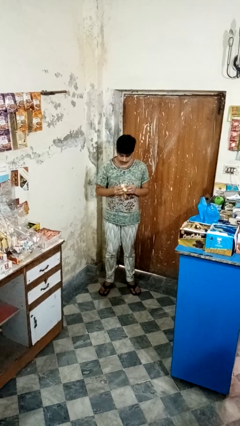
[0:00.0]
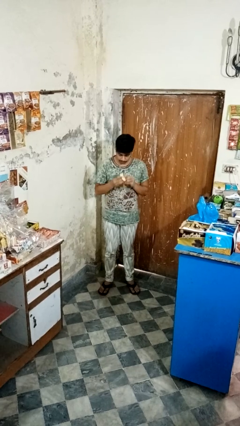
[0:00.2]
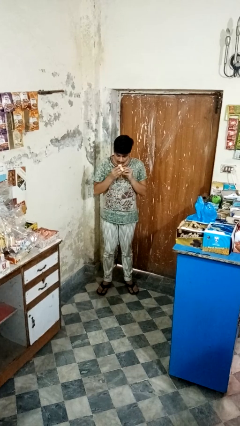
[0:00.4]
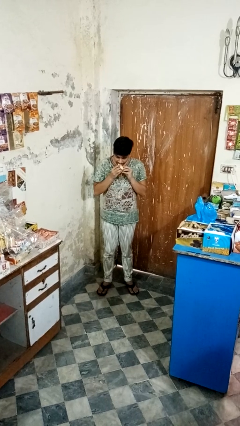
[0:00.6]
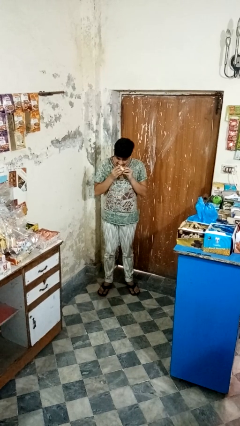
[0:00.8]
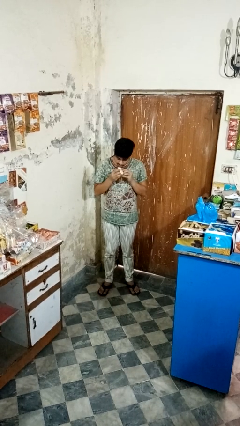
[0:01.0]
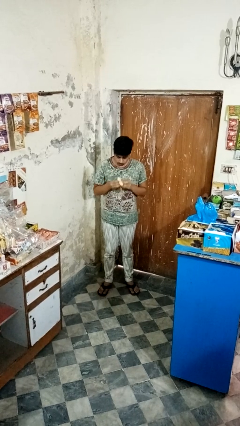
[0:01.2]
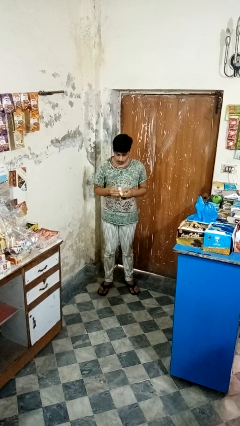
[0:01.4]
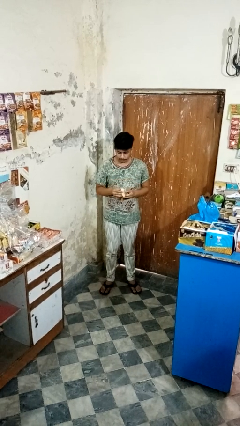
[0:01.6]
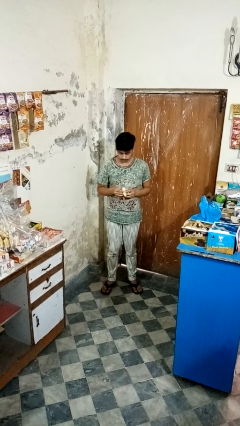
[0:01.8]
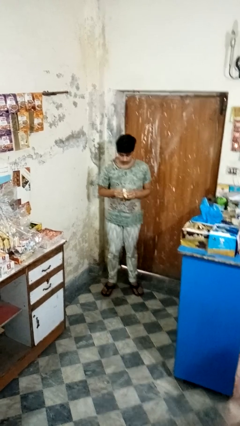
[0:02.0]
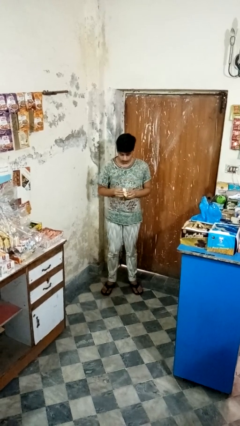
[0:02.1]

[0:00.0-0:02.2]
person eats banana

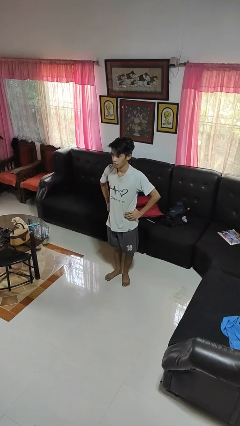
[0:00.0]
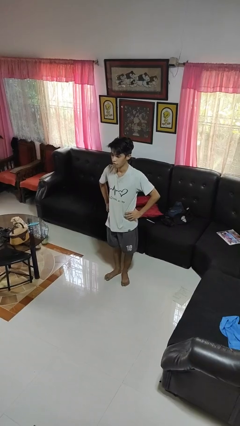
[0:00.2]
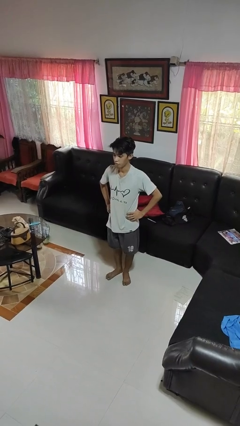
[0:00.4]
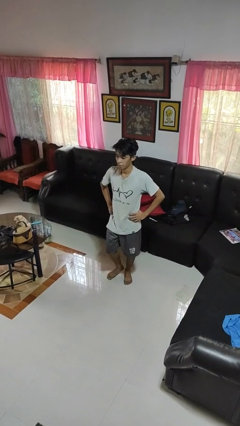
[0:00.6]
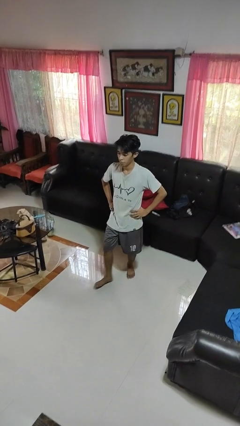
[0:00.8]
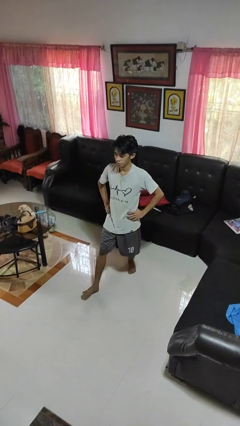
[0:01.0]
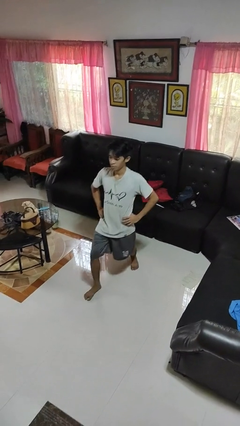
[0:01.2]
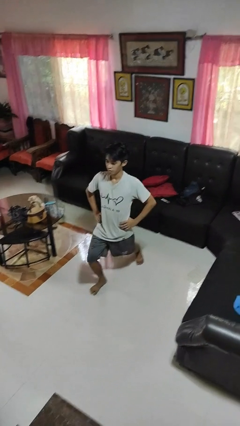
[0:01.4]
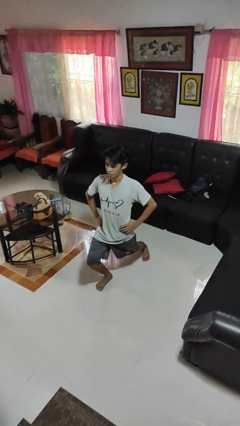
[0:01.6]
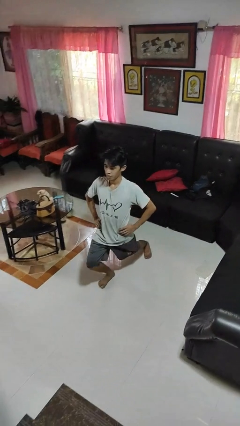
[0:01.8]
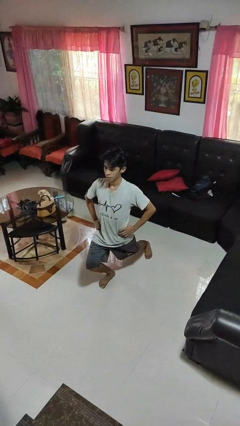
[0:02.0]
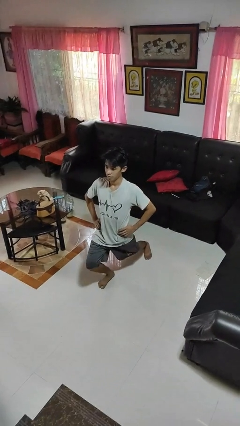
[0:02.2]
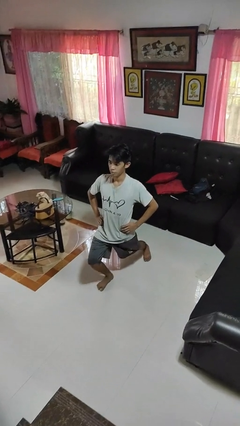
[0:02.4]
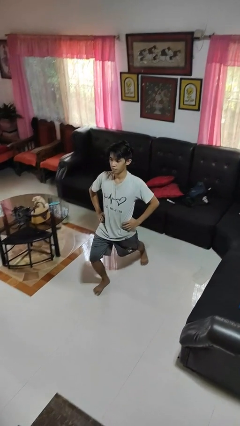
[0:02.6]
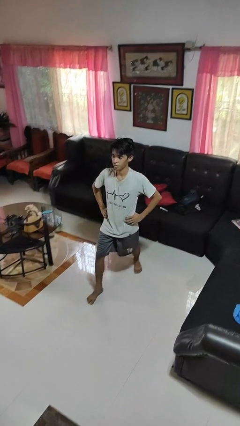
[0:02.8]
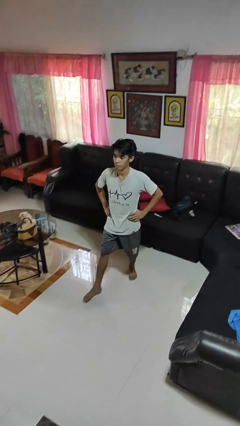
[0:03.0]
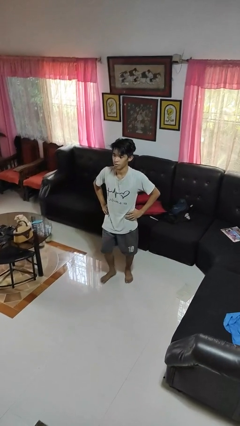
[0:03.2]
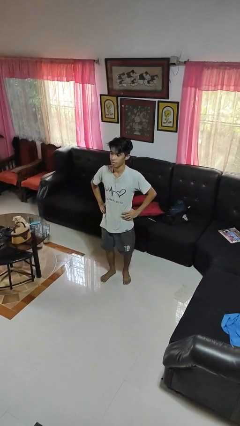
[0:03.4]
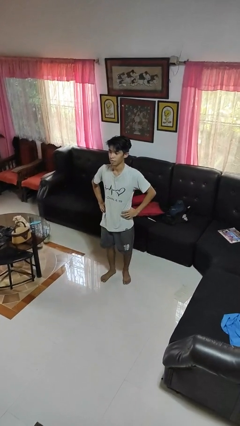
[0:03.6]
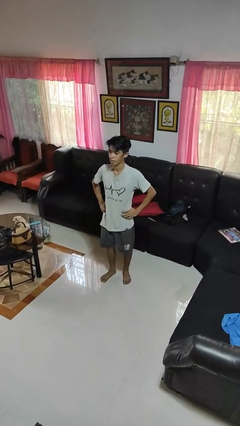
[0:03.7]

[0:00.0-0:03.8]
person exercises with lunges

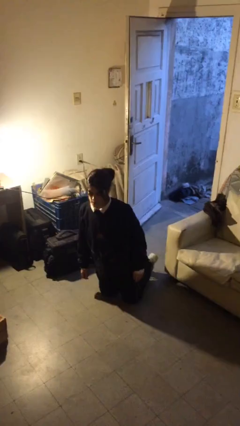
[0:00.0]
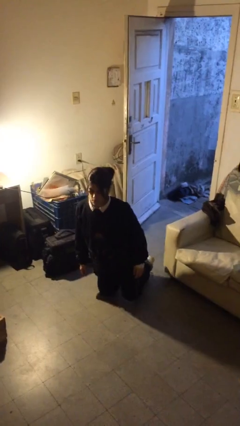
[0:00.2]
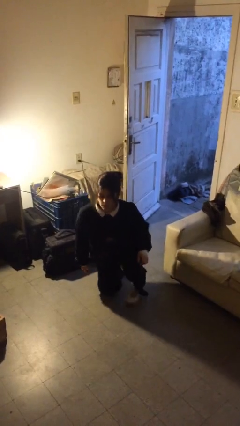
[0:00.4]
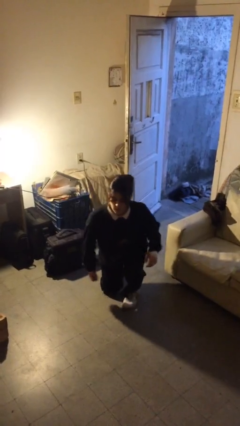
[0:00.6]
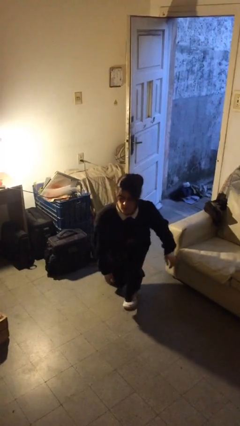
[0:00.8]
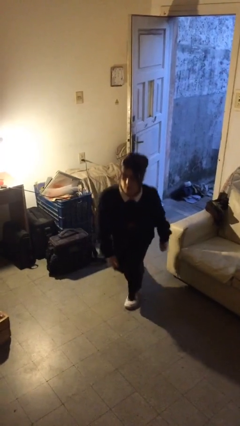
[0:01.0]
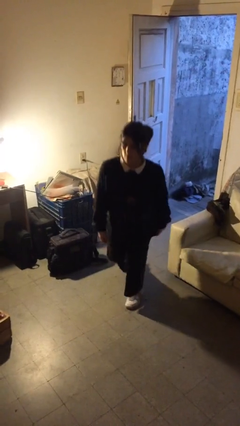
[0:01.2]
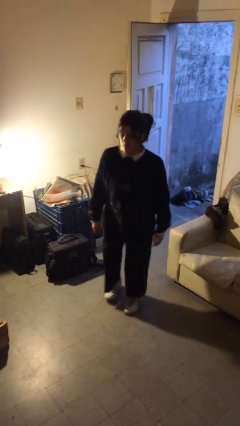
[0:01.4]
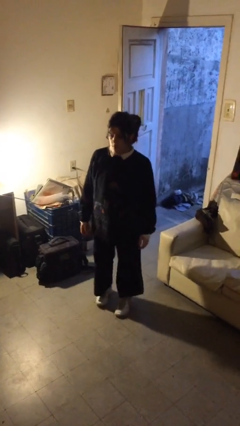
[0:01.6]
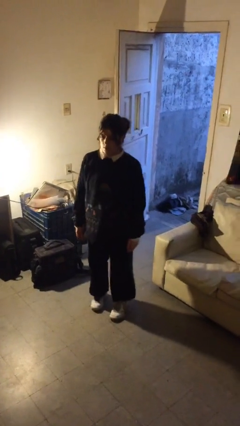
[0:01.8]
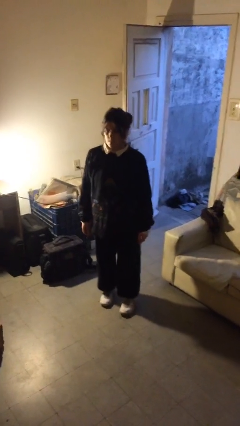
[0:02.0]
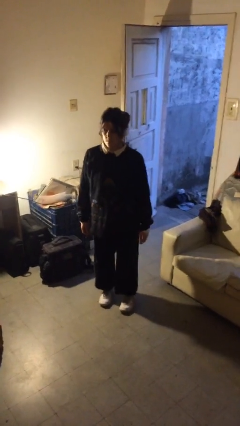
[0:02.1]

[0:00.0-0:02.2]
person stands up from floor

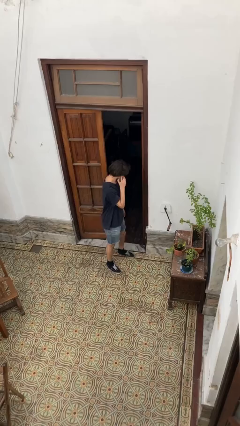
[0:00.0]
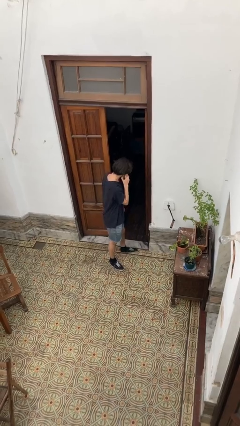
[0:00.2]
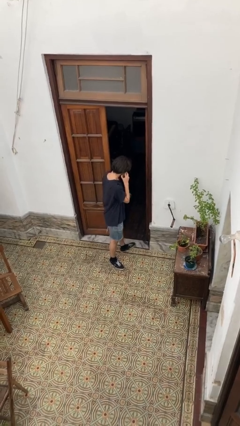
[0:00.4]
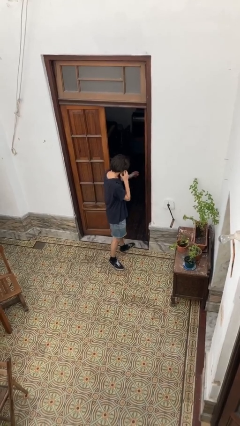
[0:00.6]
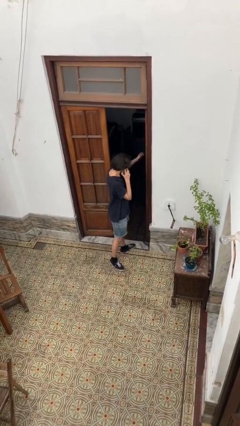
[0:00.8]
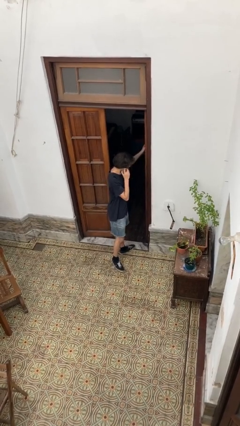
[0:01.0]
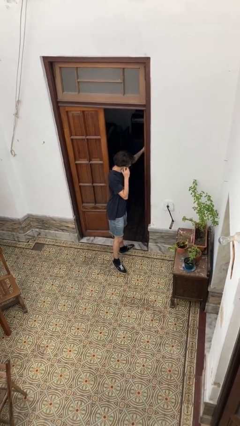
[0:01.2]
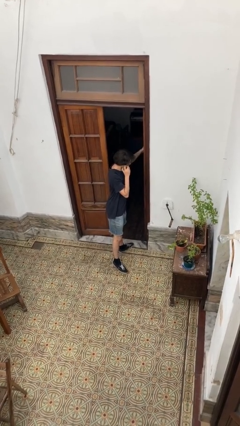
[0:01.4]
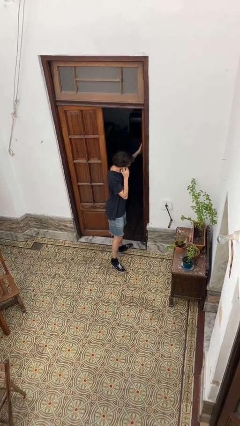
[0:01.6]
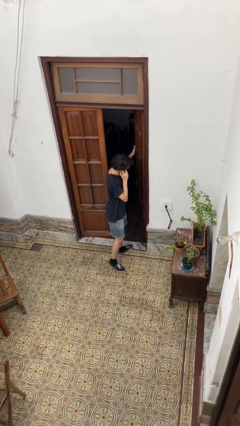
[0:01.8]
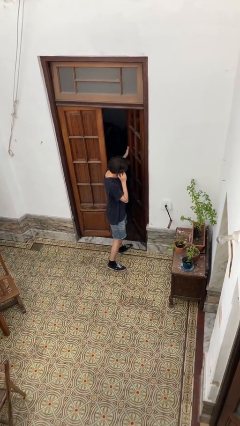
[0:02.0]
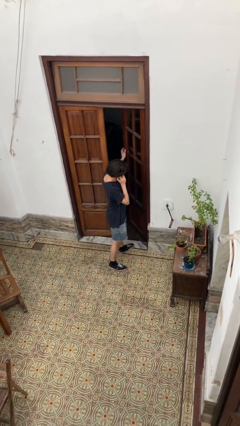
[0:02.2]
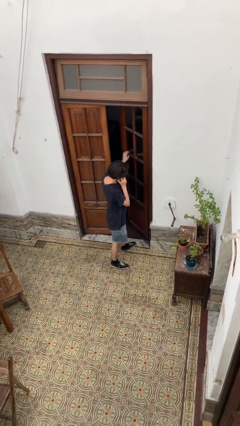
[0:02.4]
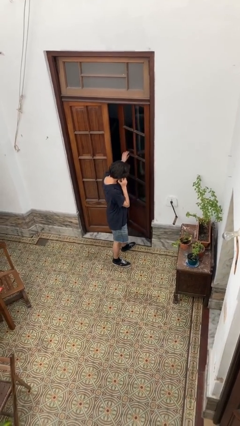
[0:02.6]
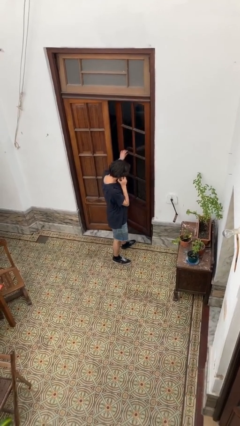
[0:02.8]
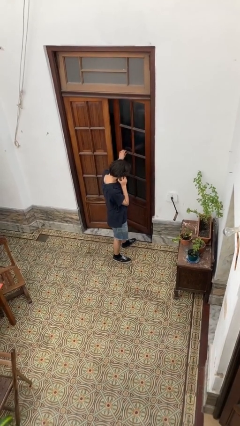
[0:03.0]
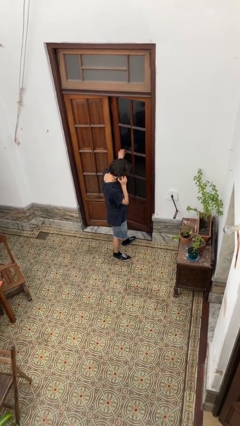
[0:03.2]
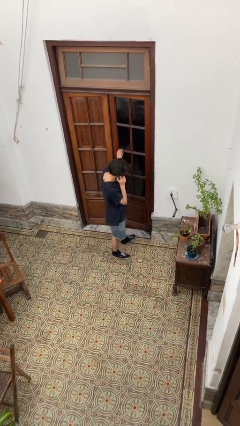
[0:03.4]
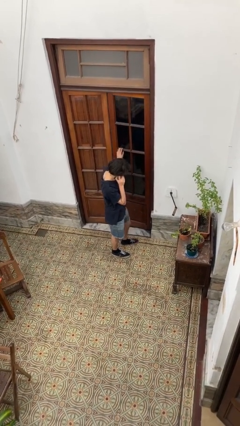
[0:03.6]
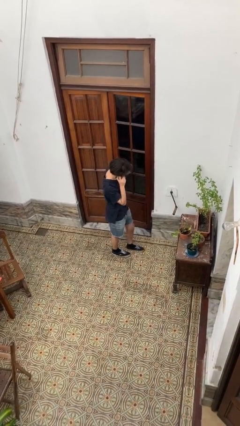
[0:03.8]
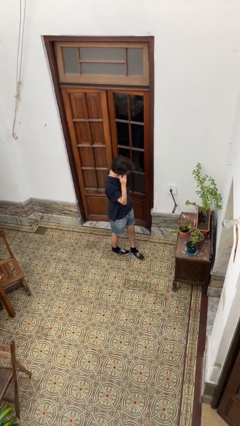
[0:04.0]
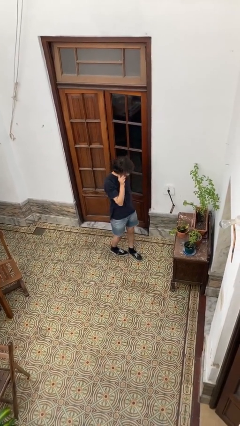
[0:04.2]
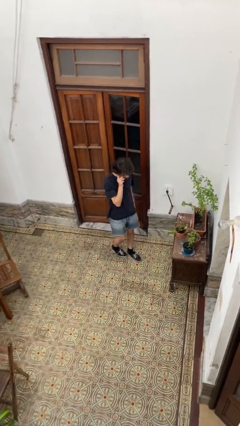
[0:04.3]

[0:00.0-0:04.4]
person closes facility door

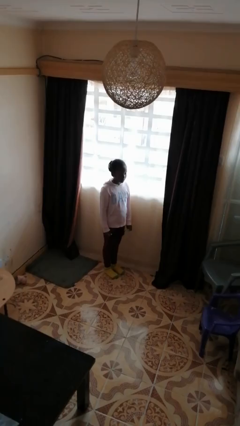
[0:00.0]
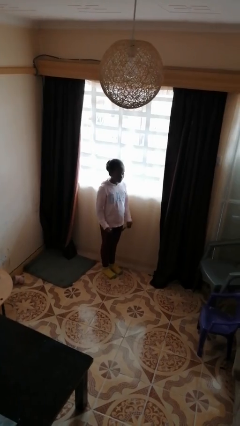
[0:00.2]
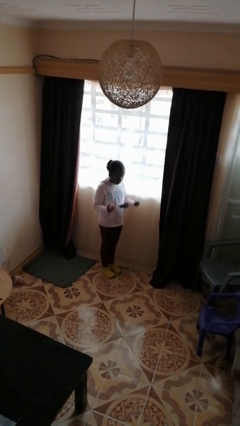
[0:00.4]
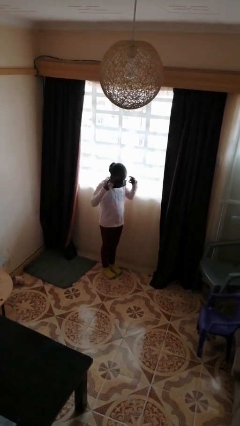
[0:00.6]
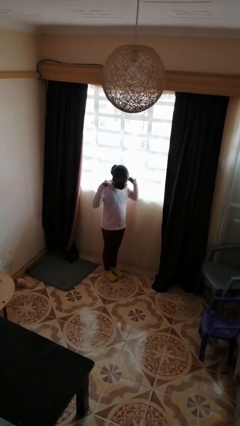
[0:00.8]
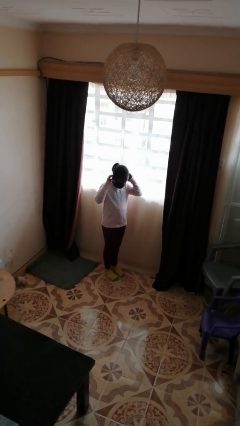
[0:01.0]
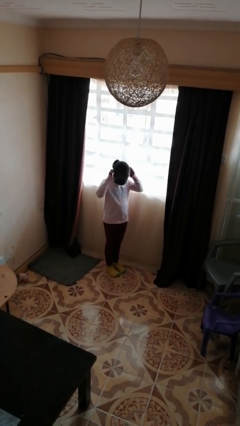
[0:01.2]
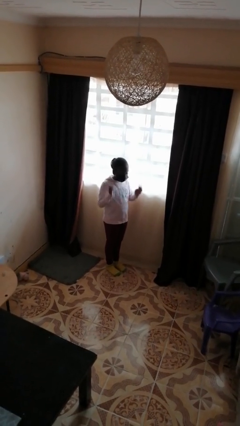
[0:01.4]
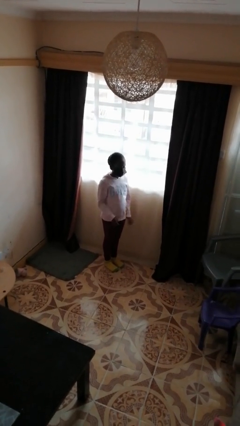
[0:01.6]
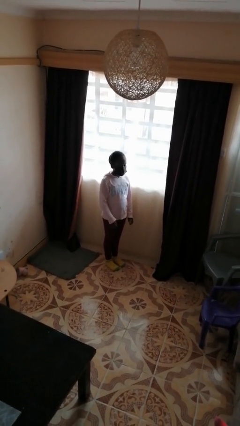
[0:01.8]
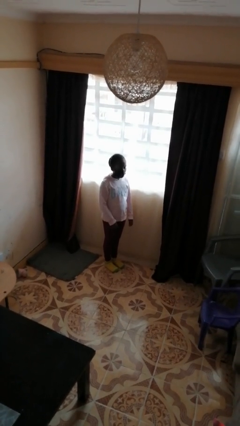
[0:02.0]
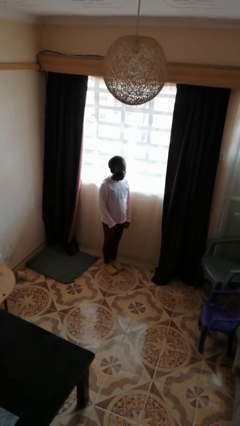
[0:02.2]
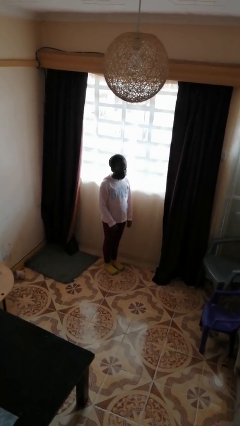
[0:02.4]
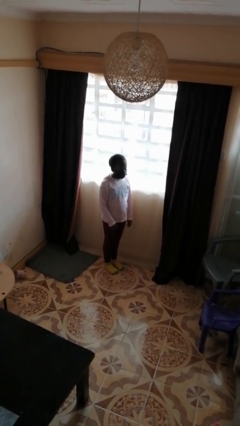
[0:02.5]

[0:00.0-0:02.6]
person puts on facemask

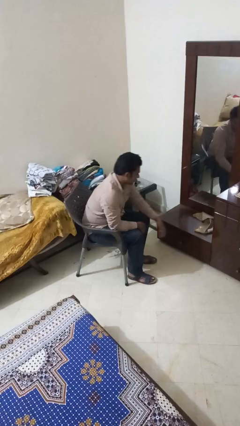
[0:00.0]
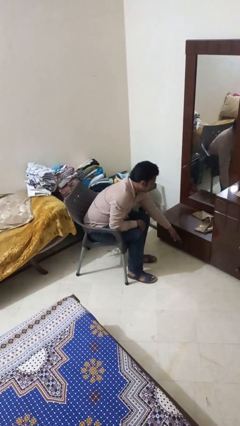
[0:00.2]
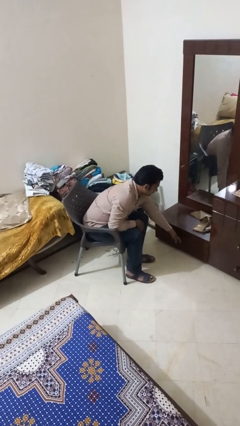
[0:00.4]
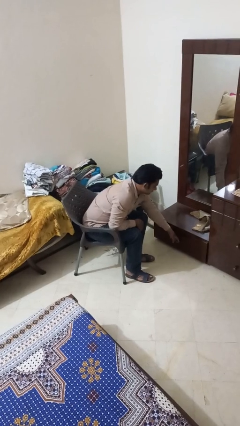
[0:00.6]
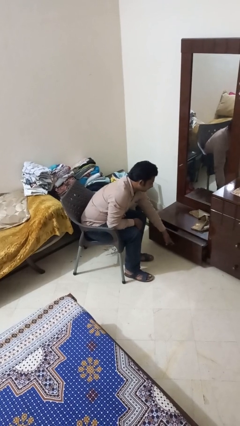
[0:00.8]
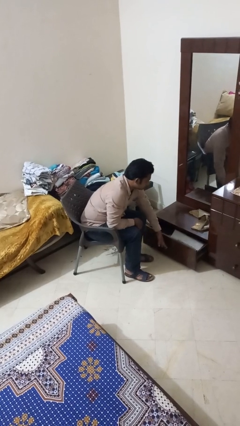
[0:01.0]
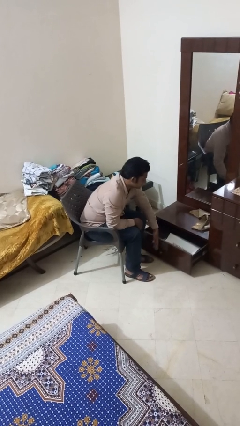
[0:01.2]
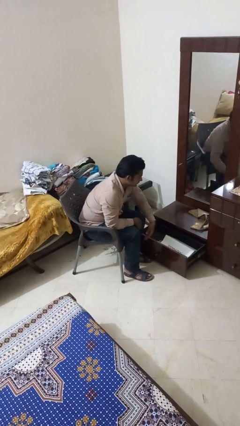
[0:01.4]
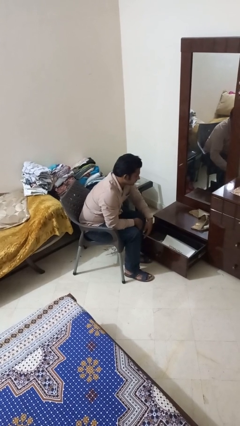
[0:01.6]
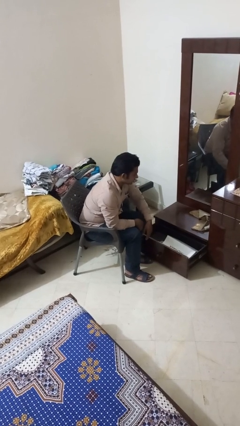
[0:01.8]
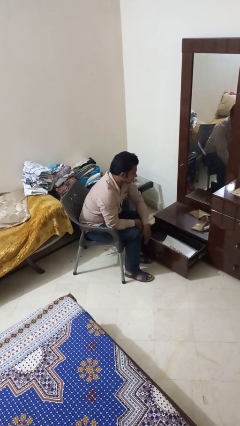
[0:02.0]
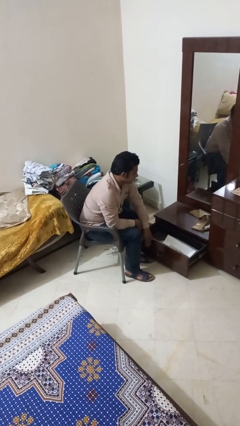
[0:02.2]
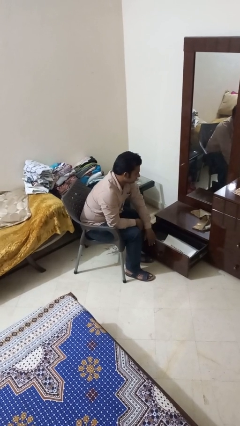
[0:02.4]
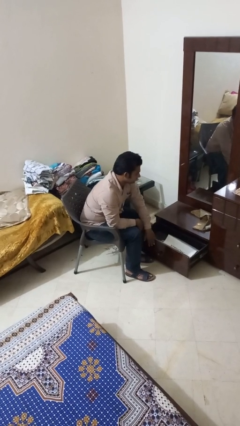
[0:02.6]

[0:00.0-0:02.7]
person opens closet door
